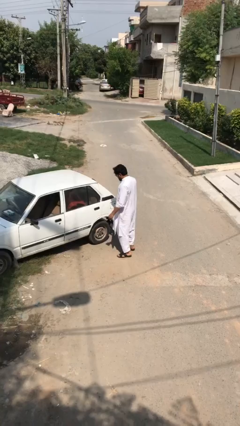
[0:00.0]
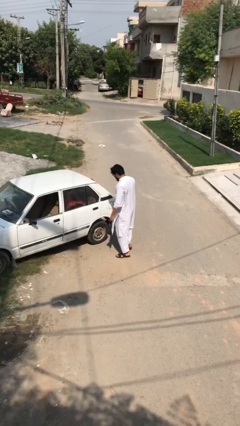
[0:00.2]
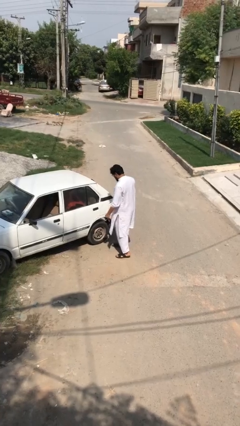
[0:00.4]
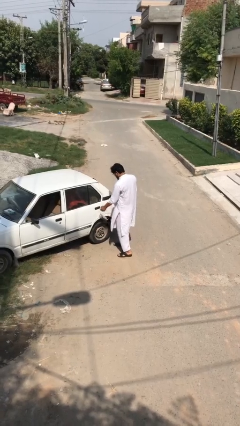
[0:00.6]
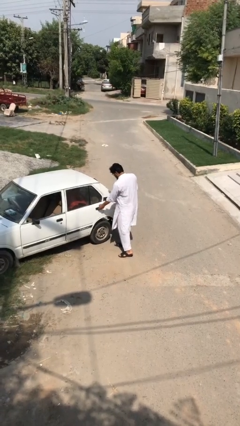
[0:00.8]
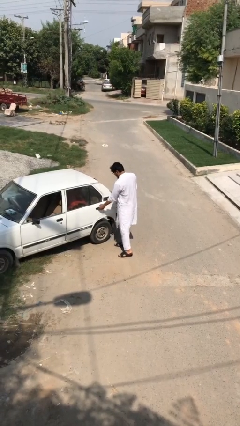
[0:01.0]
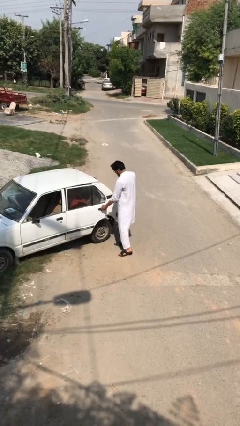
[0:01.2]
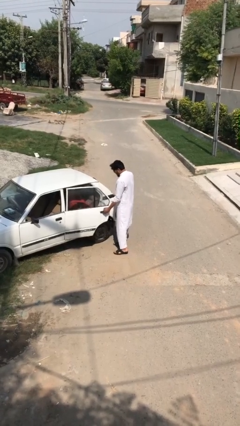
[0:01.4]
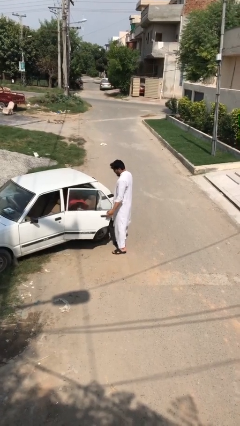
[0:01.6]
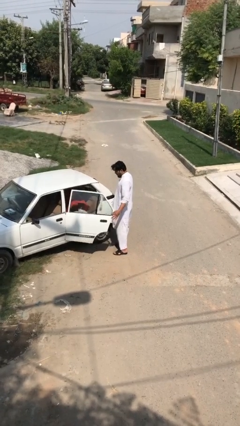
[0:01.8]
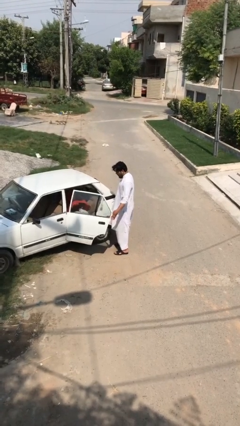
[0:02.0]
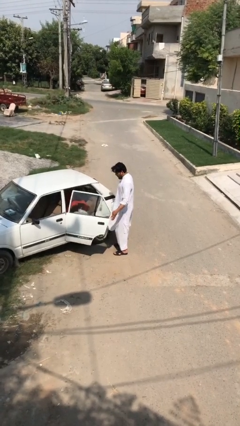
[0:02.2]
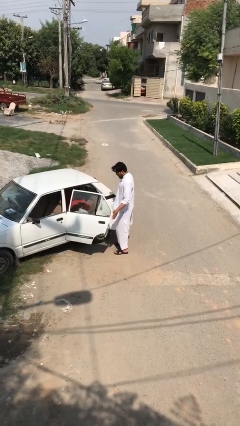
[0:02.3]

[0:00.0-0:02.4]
person opens car door

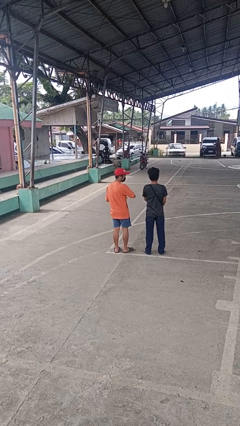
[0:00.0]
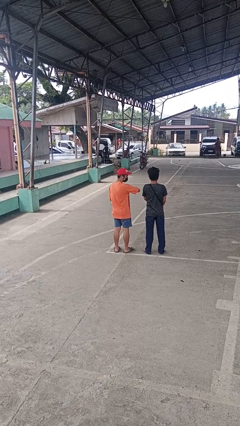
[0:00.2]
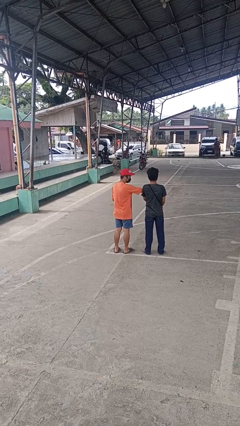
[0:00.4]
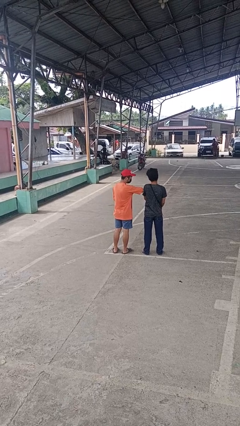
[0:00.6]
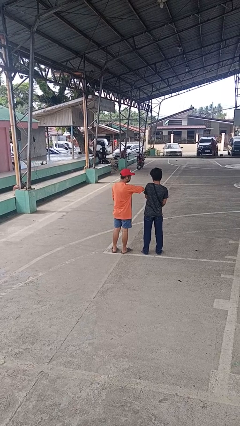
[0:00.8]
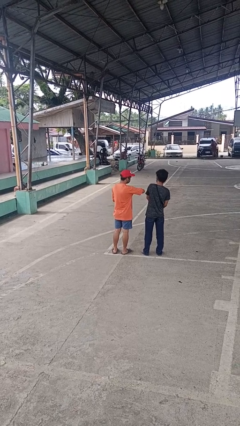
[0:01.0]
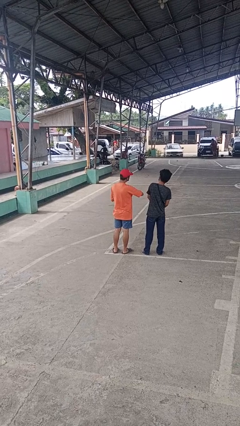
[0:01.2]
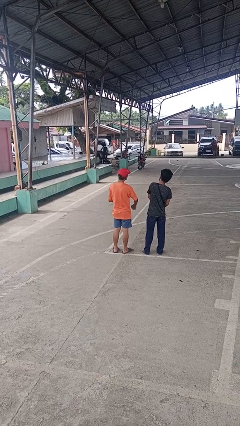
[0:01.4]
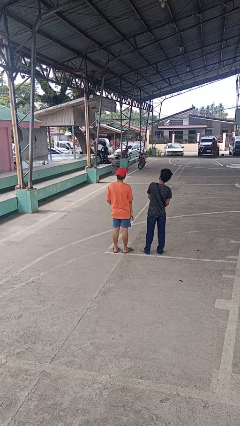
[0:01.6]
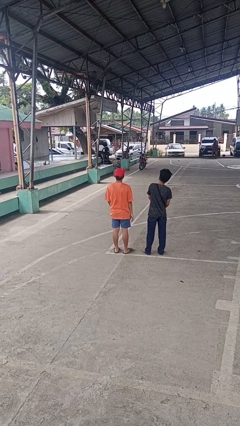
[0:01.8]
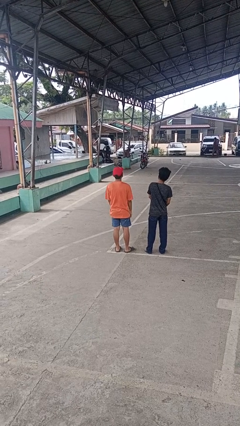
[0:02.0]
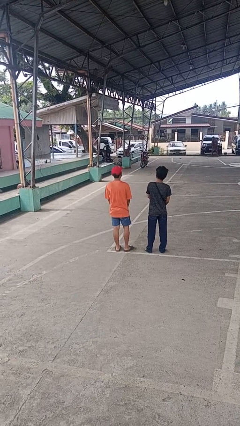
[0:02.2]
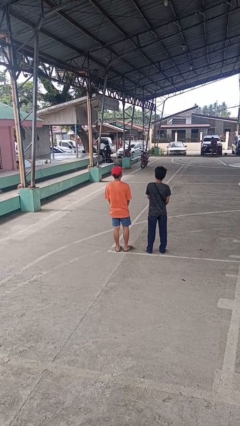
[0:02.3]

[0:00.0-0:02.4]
person nudges person with elbow

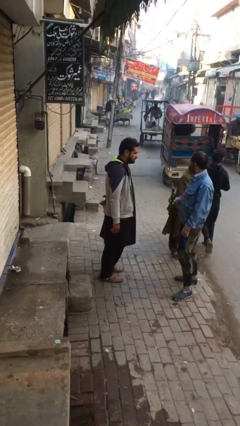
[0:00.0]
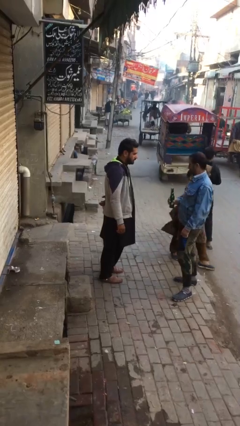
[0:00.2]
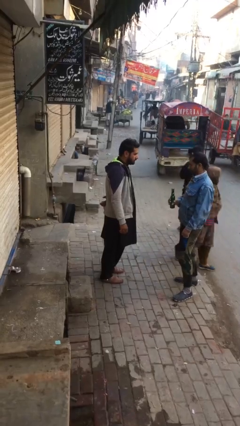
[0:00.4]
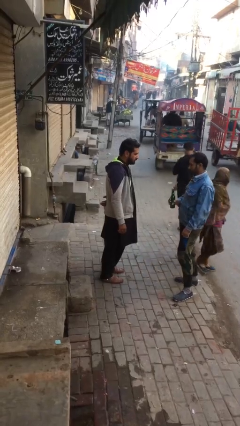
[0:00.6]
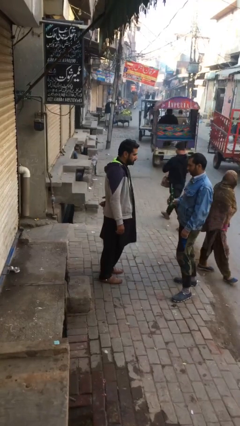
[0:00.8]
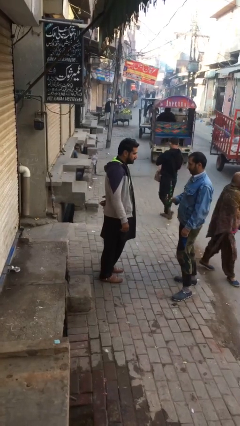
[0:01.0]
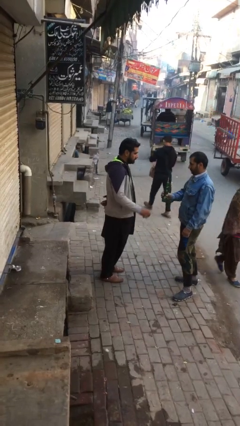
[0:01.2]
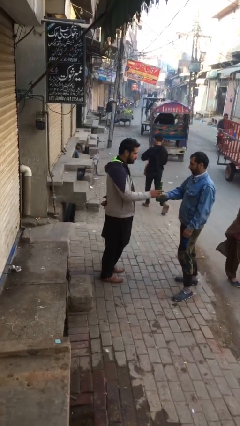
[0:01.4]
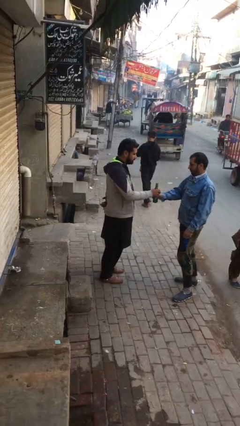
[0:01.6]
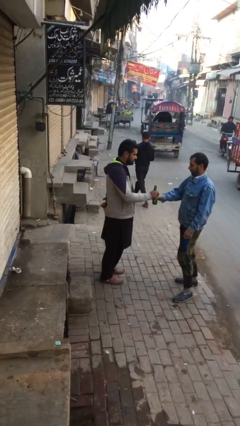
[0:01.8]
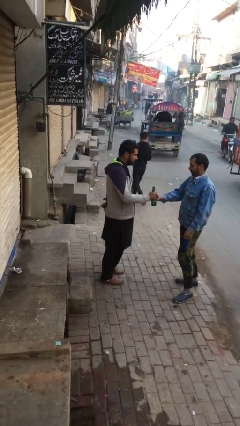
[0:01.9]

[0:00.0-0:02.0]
person transfers object to person

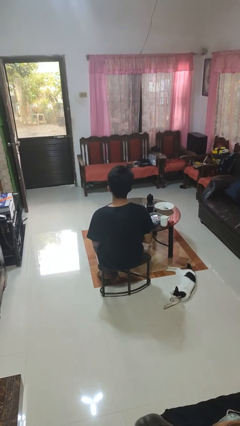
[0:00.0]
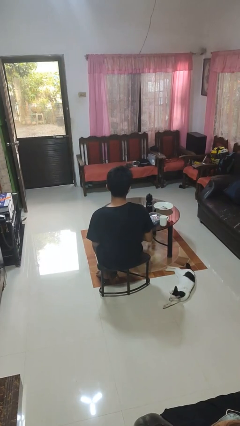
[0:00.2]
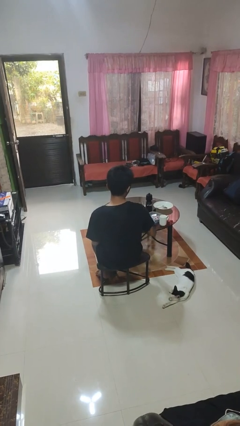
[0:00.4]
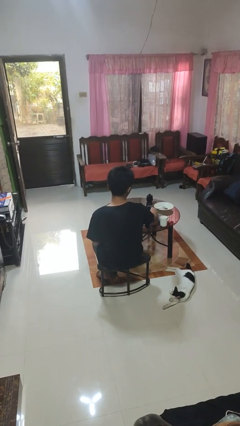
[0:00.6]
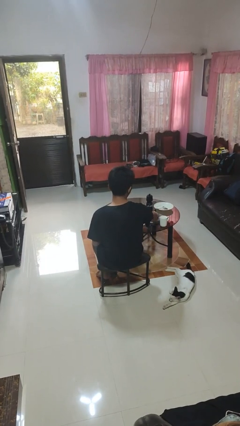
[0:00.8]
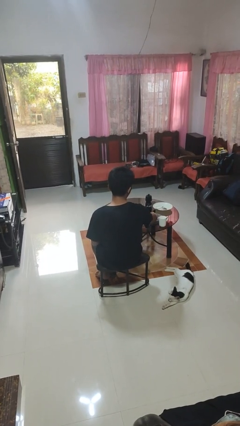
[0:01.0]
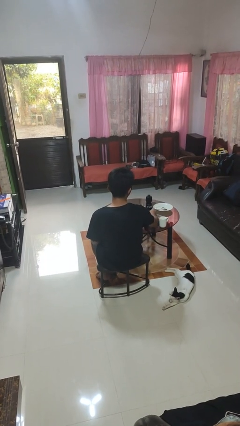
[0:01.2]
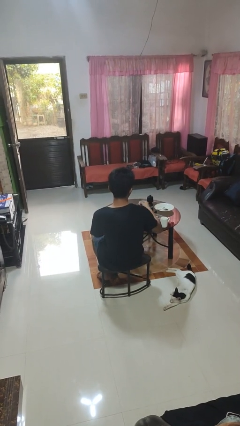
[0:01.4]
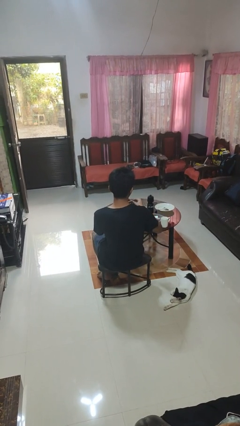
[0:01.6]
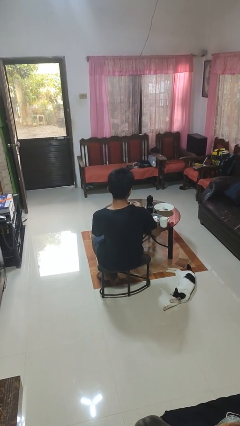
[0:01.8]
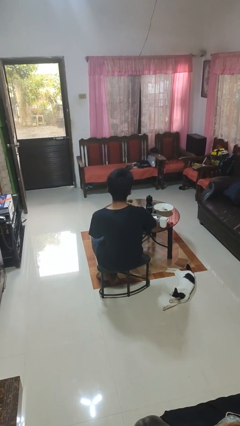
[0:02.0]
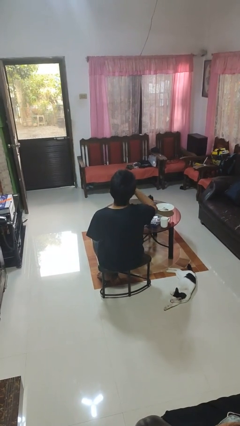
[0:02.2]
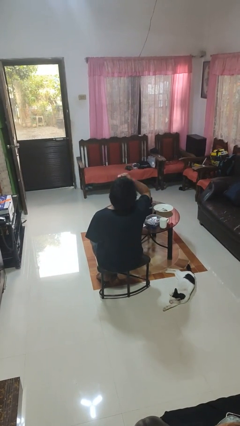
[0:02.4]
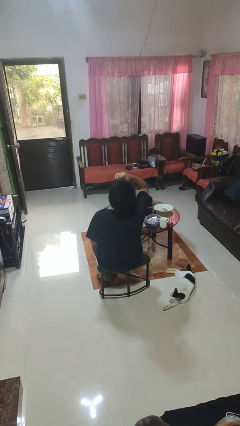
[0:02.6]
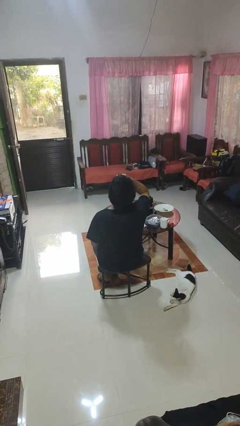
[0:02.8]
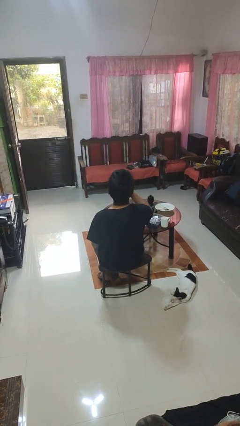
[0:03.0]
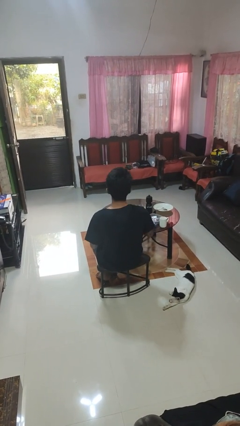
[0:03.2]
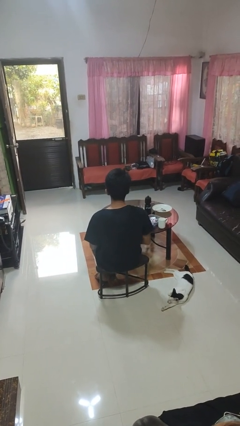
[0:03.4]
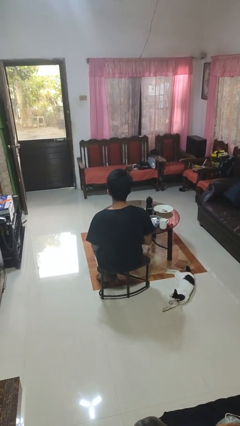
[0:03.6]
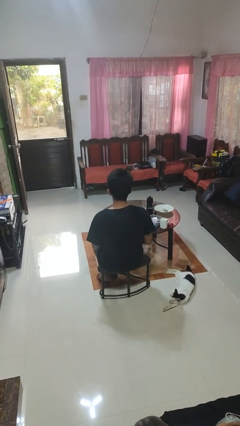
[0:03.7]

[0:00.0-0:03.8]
person takes medicine pills

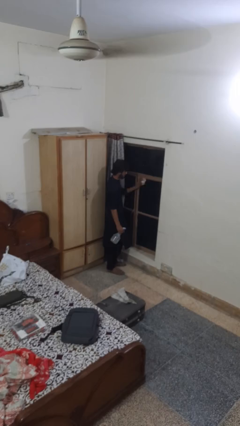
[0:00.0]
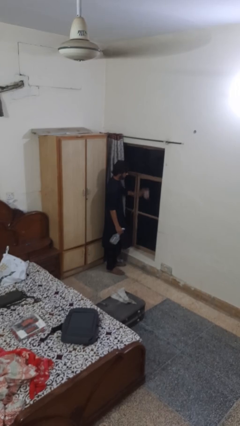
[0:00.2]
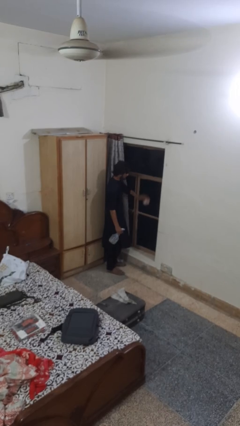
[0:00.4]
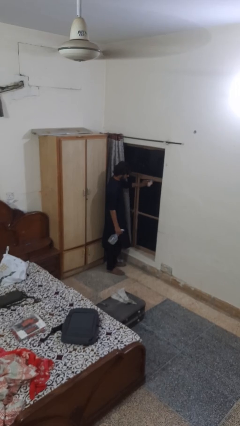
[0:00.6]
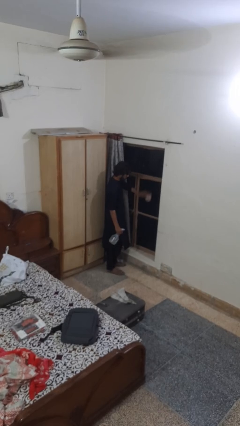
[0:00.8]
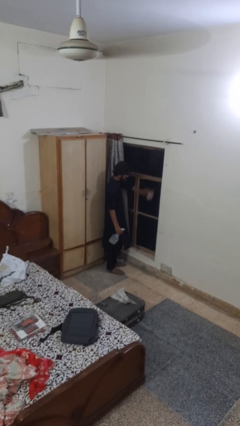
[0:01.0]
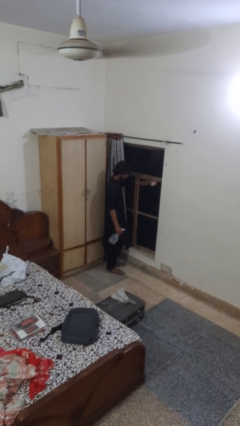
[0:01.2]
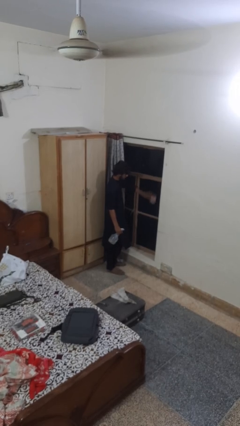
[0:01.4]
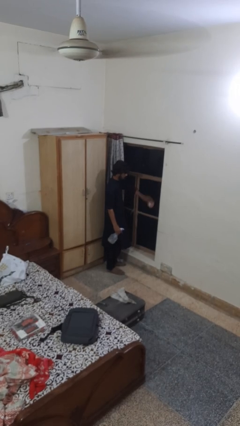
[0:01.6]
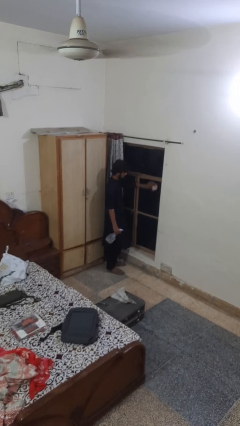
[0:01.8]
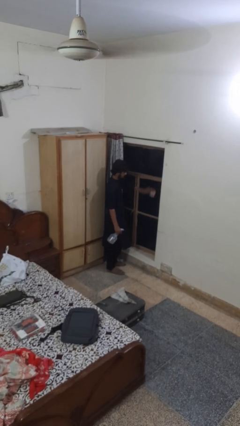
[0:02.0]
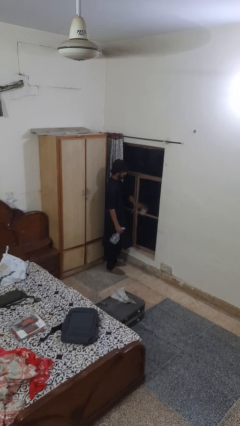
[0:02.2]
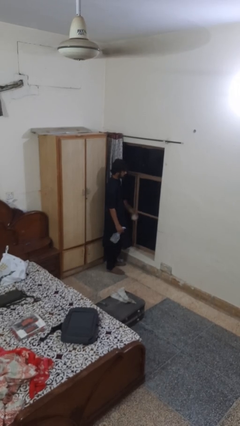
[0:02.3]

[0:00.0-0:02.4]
person washes window

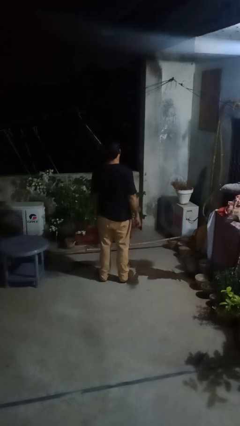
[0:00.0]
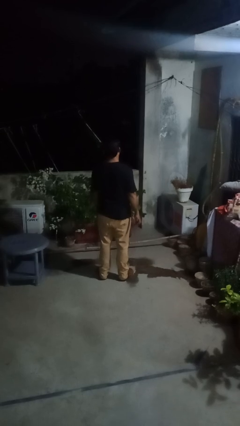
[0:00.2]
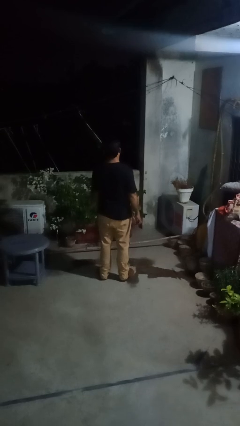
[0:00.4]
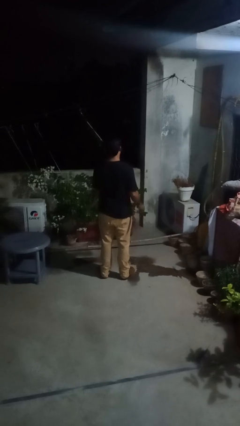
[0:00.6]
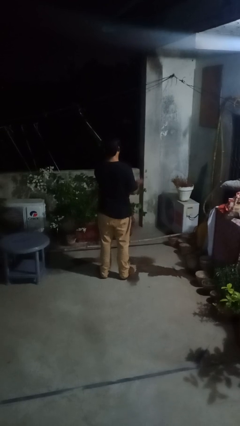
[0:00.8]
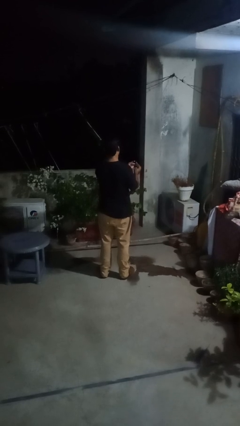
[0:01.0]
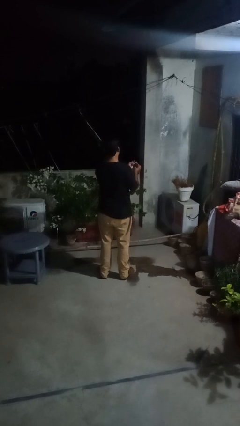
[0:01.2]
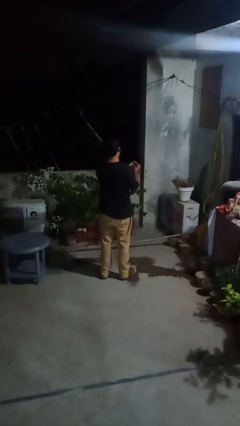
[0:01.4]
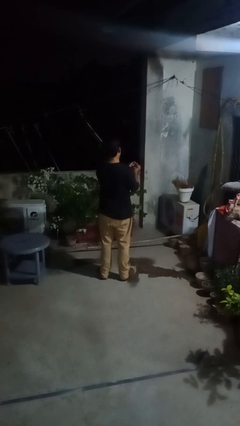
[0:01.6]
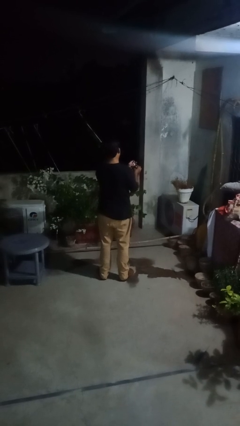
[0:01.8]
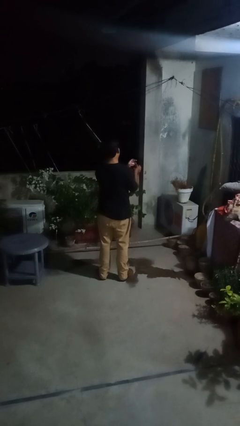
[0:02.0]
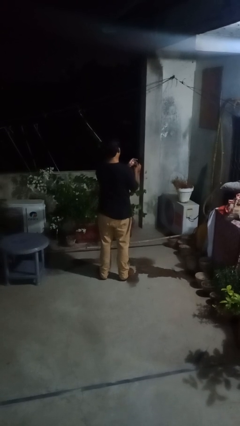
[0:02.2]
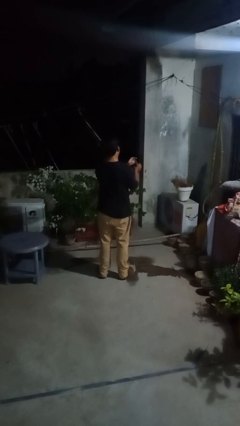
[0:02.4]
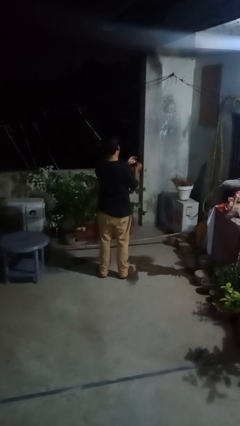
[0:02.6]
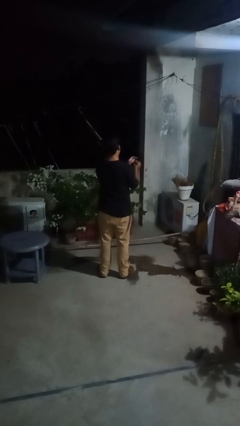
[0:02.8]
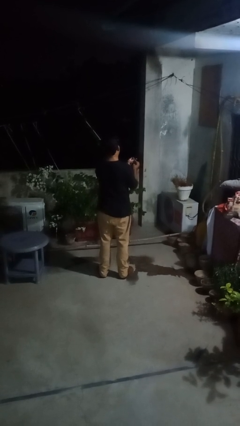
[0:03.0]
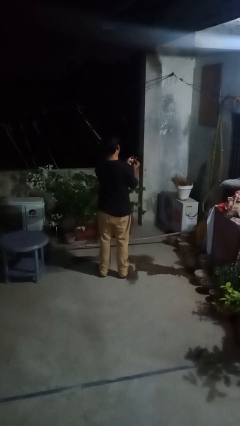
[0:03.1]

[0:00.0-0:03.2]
person files fingernails

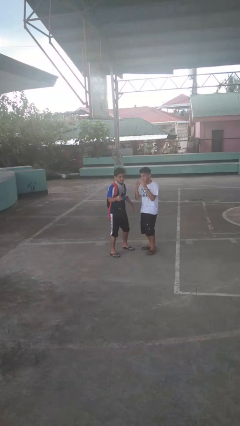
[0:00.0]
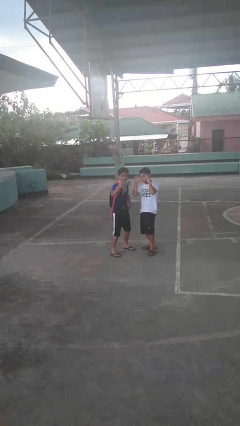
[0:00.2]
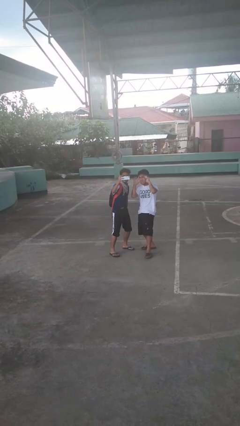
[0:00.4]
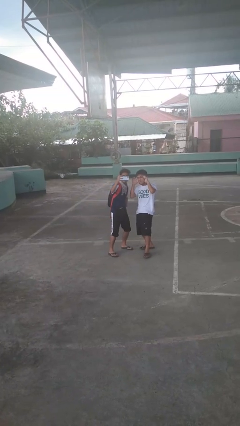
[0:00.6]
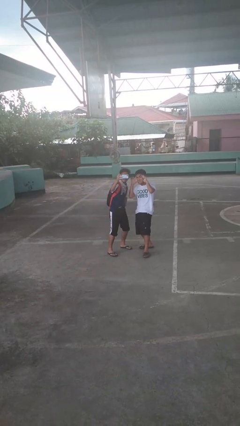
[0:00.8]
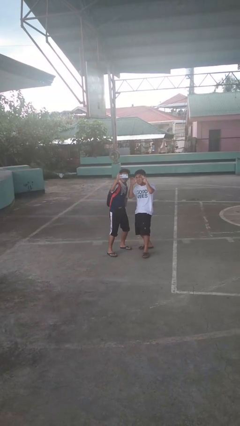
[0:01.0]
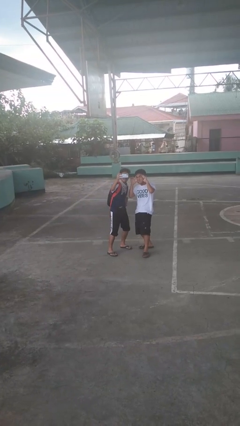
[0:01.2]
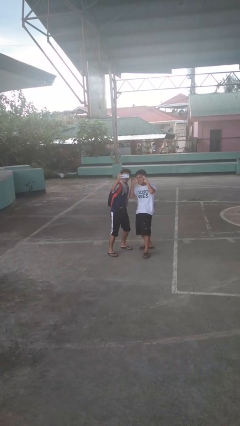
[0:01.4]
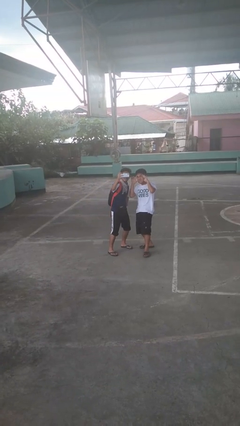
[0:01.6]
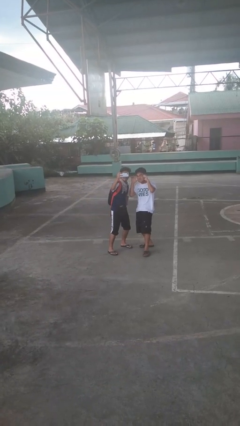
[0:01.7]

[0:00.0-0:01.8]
person takes selfie with person
